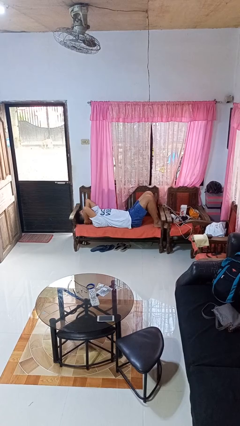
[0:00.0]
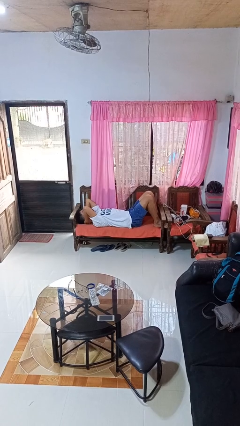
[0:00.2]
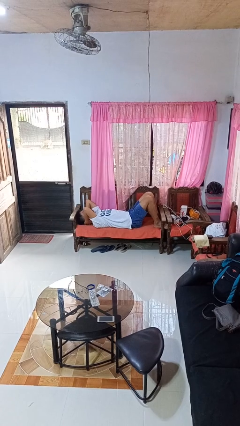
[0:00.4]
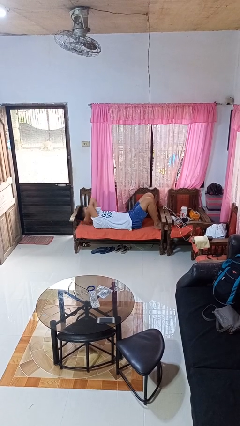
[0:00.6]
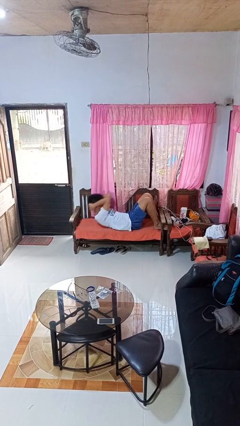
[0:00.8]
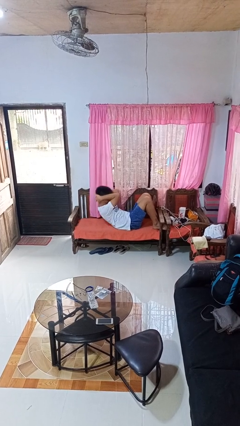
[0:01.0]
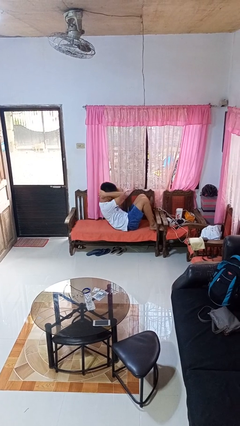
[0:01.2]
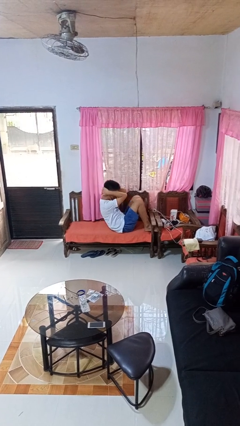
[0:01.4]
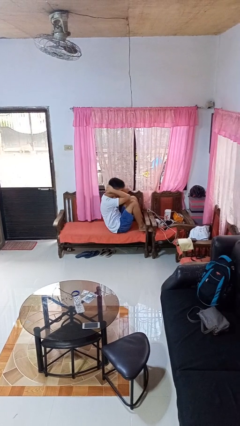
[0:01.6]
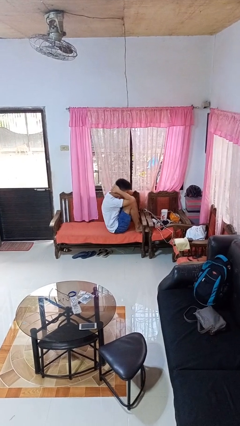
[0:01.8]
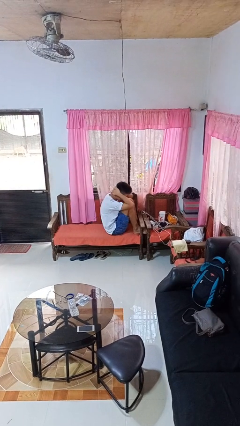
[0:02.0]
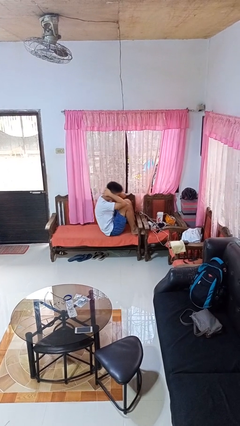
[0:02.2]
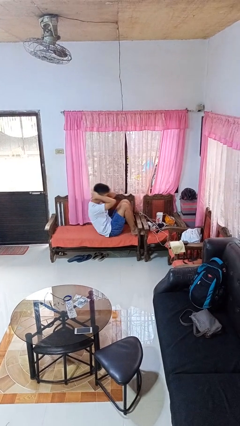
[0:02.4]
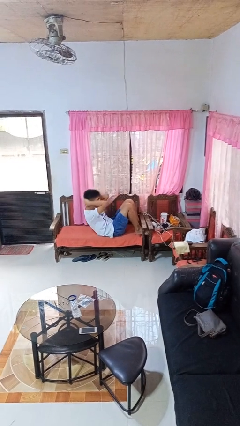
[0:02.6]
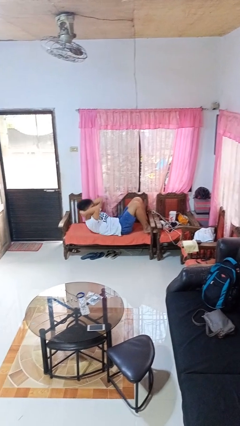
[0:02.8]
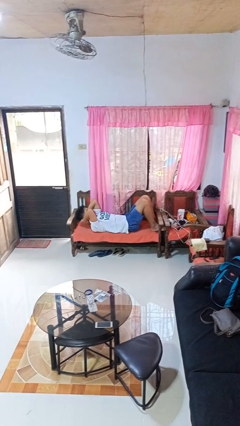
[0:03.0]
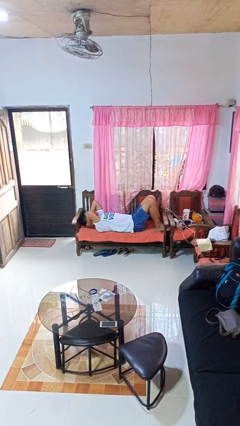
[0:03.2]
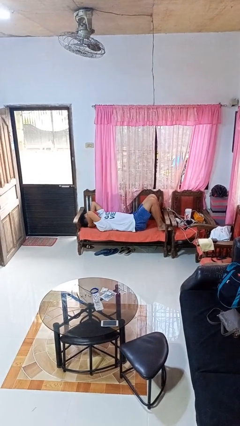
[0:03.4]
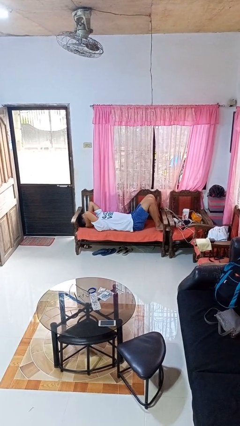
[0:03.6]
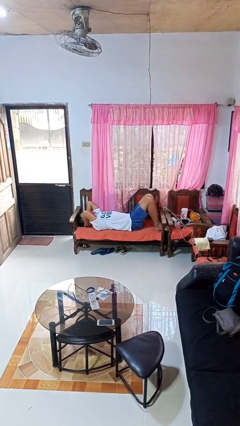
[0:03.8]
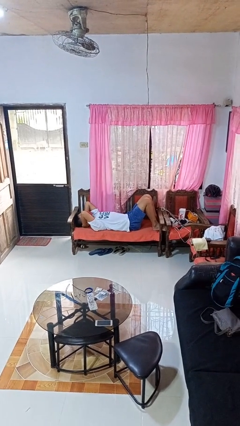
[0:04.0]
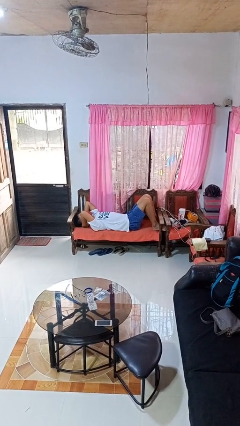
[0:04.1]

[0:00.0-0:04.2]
person exercises with situp

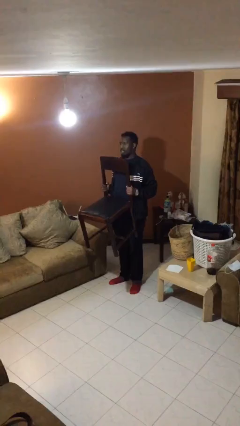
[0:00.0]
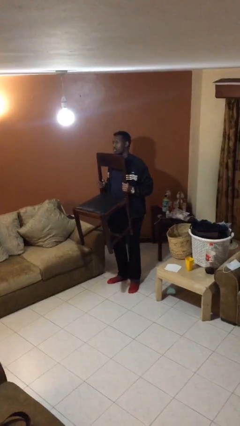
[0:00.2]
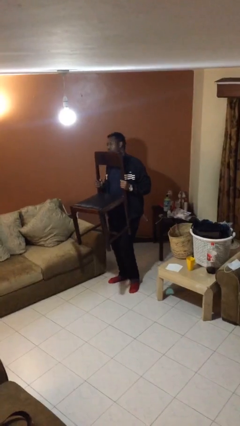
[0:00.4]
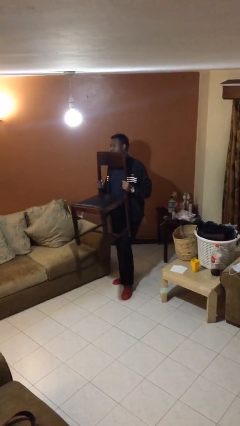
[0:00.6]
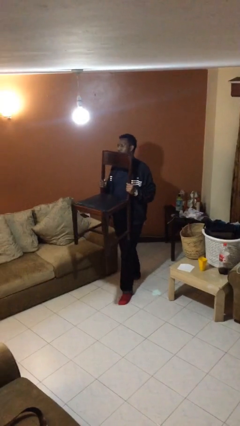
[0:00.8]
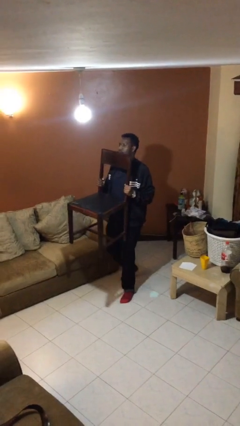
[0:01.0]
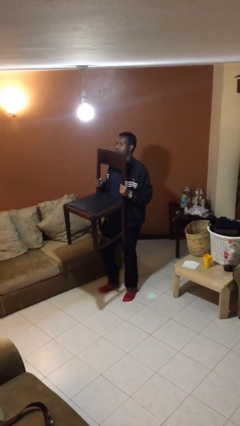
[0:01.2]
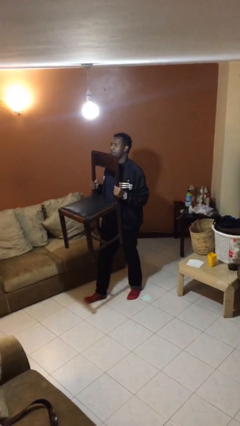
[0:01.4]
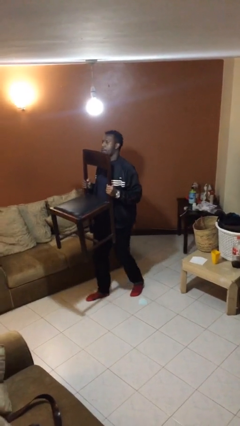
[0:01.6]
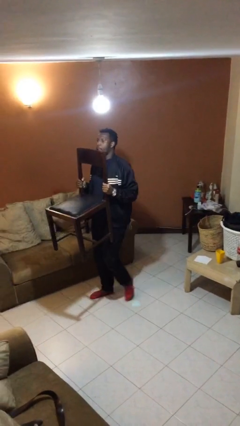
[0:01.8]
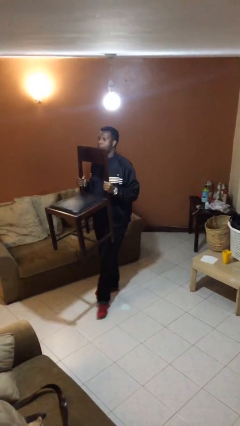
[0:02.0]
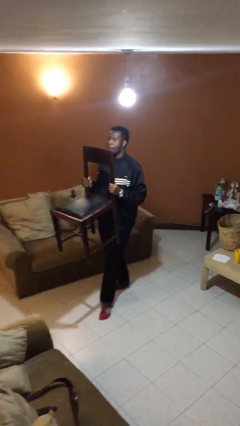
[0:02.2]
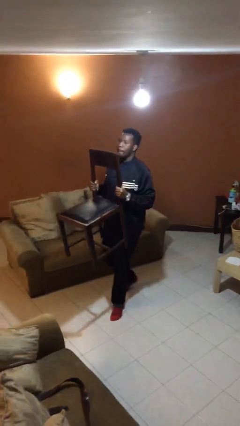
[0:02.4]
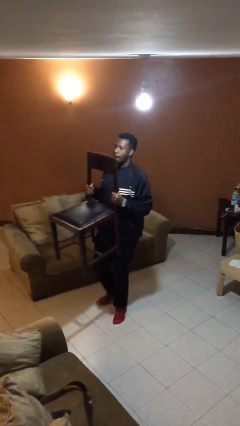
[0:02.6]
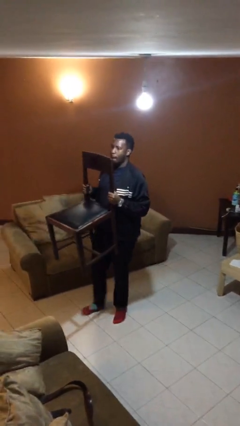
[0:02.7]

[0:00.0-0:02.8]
person carries furniture

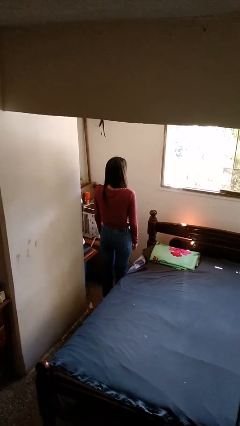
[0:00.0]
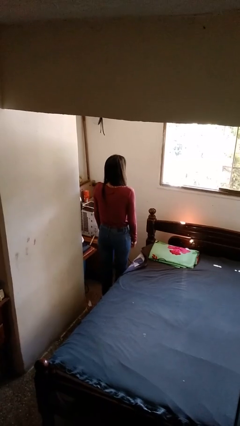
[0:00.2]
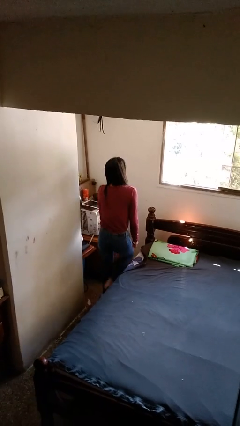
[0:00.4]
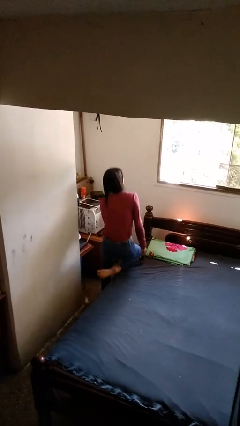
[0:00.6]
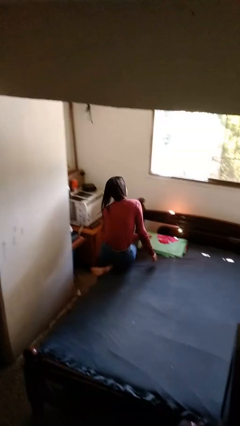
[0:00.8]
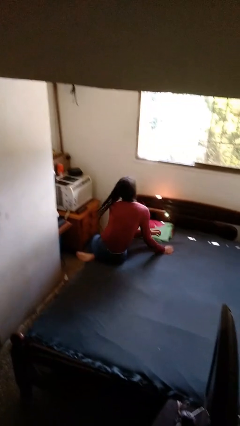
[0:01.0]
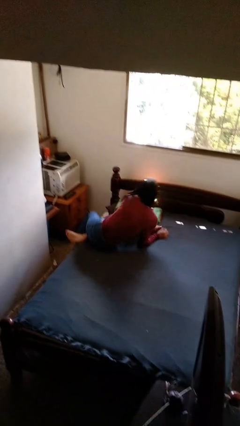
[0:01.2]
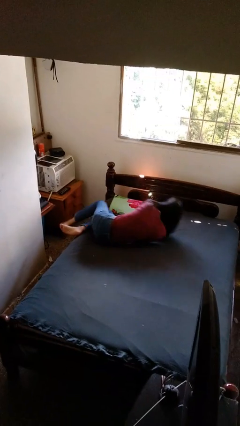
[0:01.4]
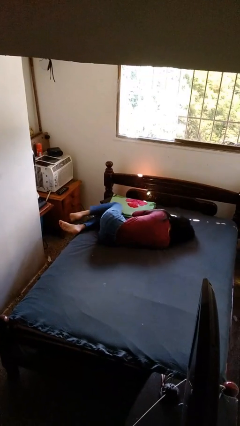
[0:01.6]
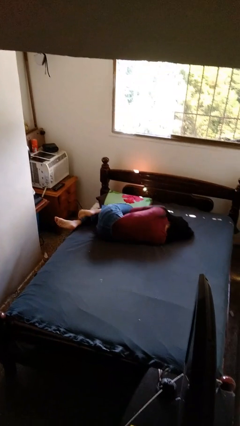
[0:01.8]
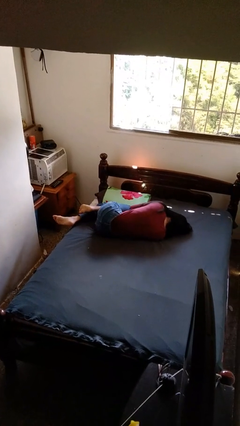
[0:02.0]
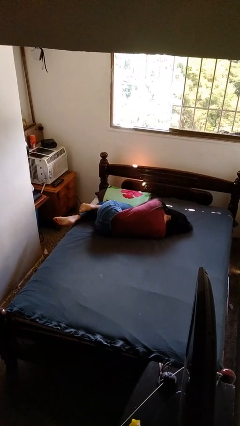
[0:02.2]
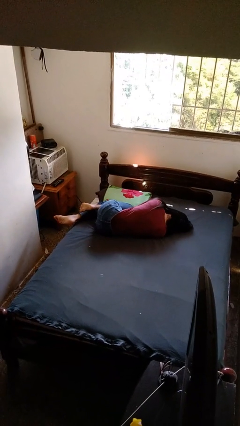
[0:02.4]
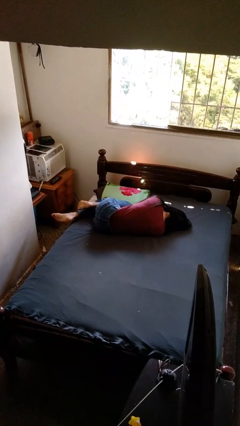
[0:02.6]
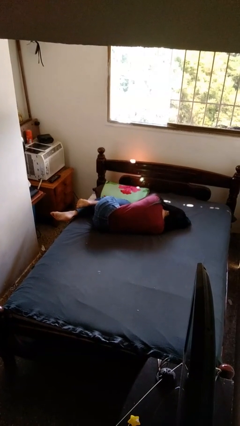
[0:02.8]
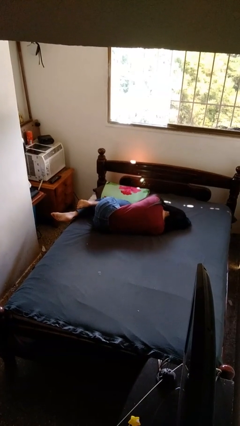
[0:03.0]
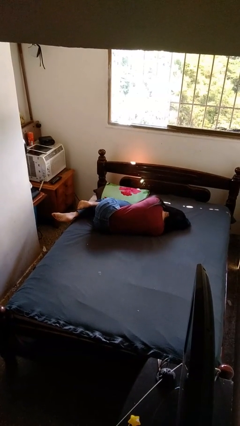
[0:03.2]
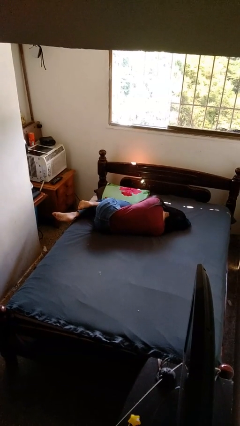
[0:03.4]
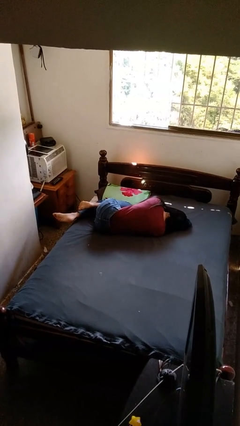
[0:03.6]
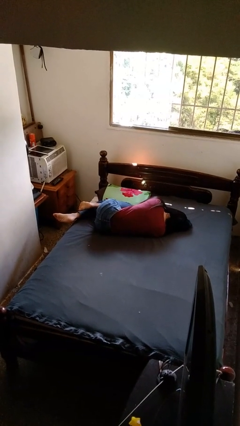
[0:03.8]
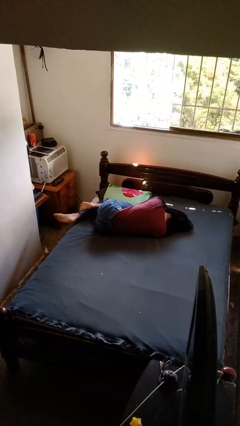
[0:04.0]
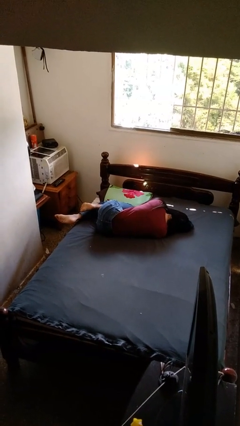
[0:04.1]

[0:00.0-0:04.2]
person lies down on bed

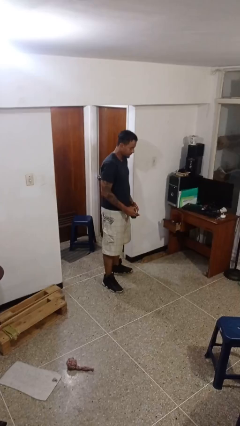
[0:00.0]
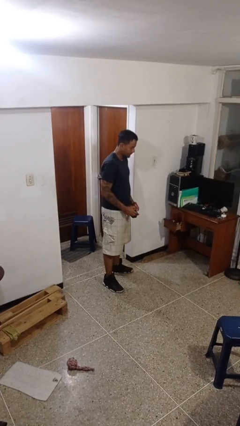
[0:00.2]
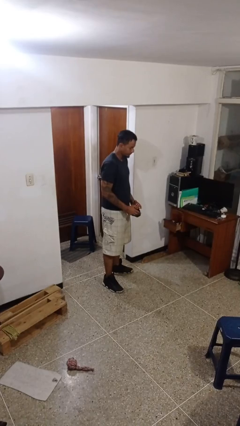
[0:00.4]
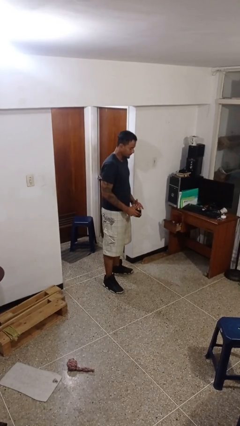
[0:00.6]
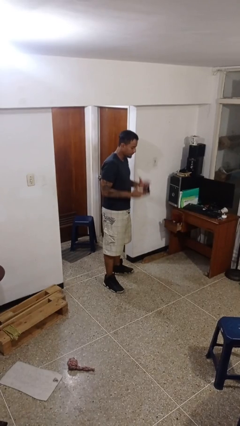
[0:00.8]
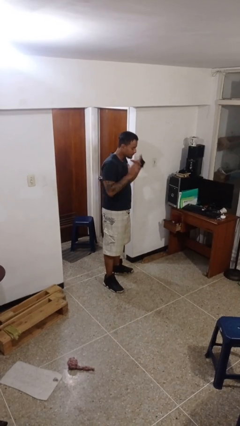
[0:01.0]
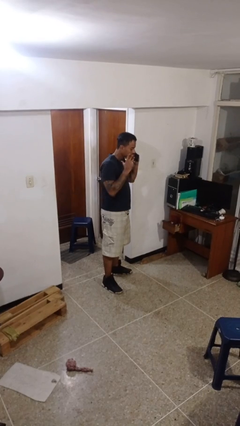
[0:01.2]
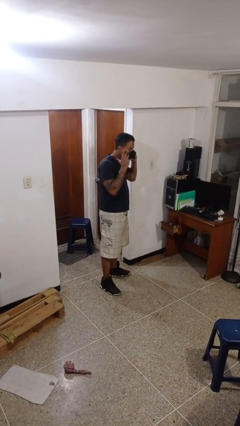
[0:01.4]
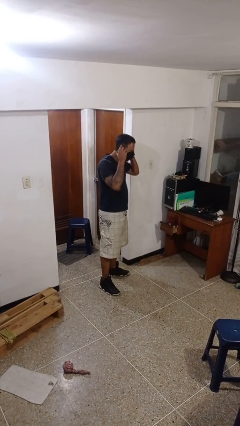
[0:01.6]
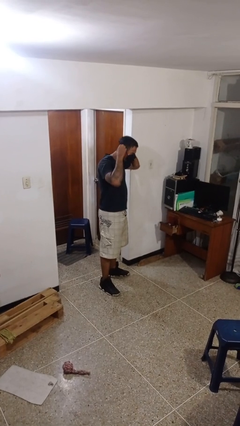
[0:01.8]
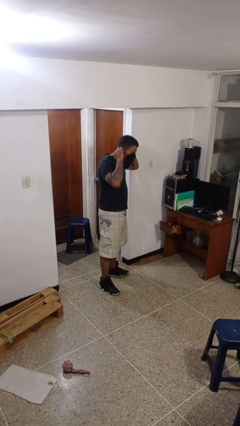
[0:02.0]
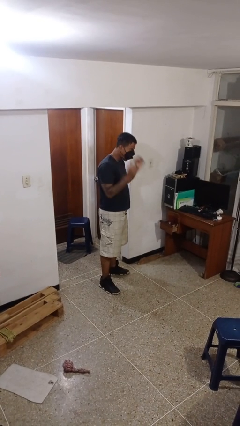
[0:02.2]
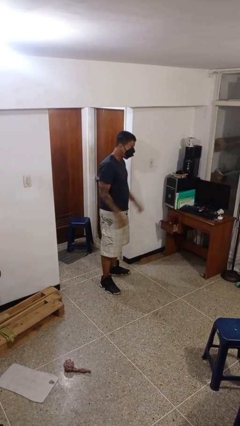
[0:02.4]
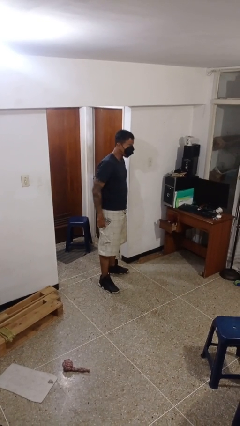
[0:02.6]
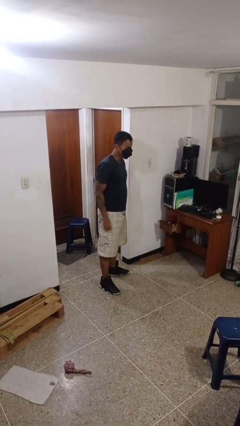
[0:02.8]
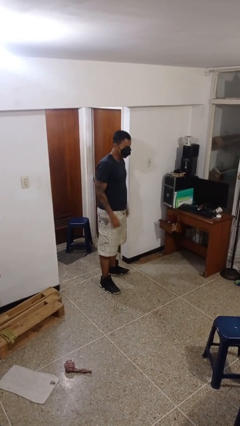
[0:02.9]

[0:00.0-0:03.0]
person puts on facemask

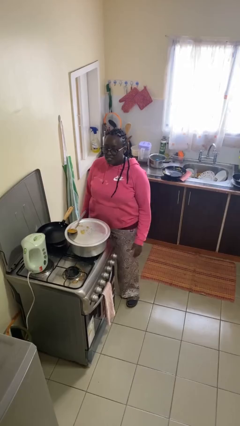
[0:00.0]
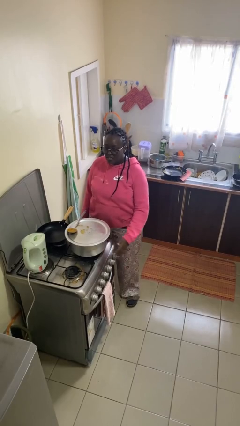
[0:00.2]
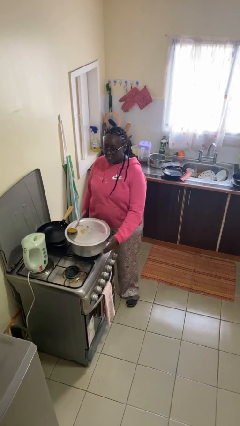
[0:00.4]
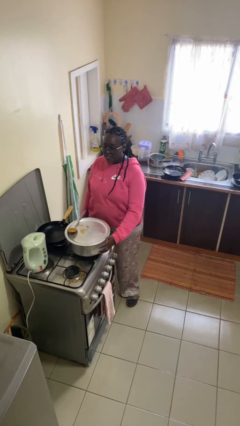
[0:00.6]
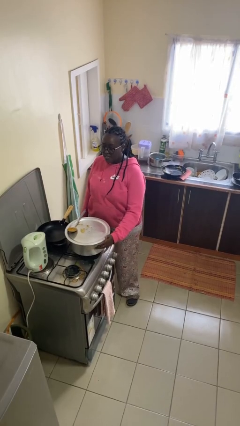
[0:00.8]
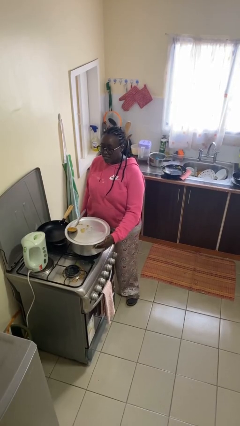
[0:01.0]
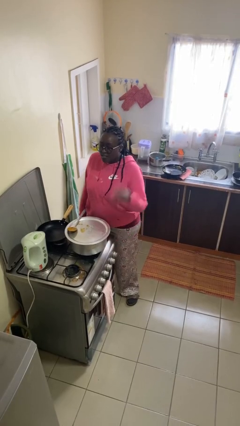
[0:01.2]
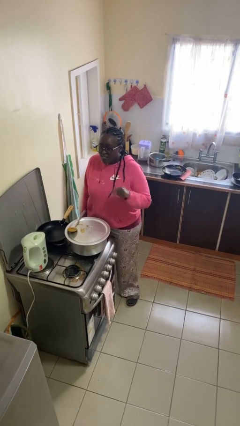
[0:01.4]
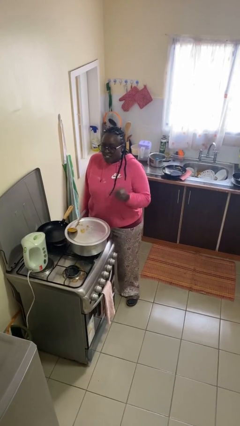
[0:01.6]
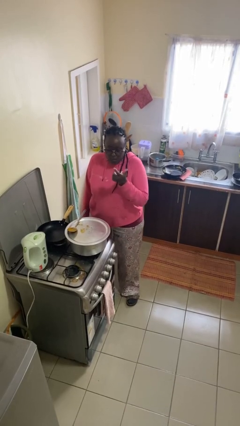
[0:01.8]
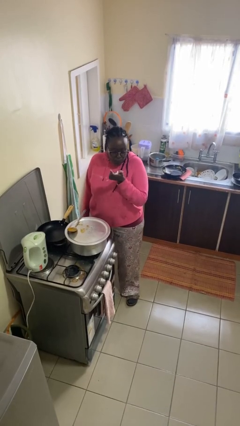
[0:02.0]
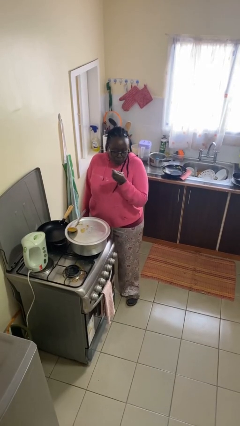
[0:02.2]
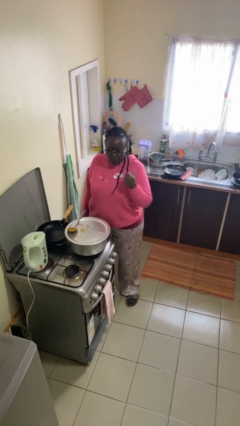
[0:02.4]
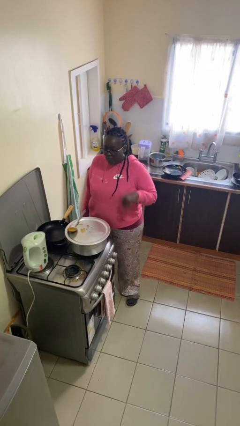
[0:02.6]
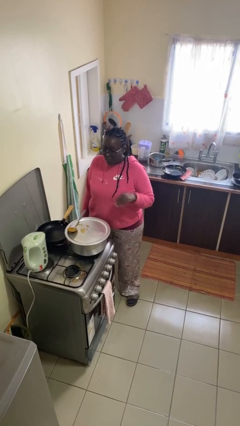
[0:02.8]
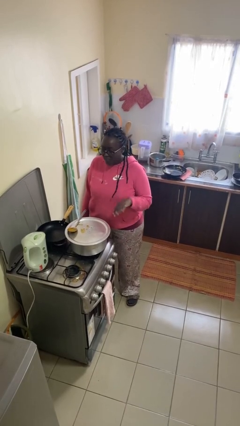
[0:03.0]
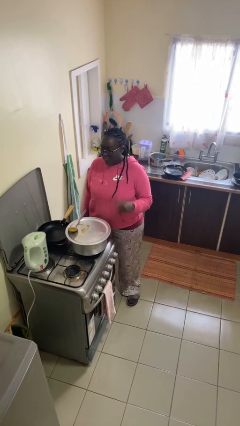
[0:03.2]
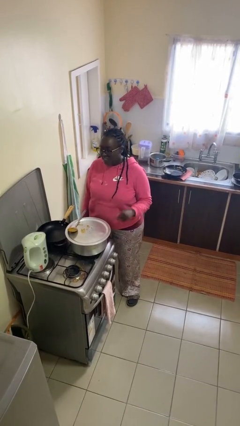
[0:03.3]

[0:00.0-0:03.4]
person burns hand

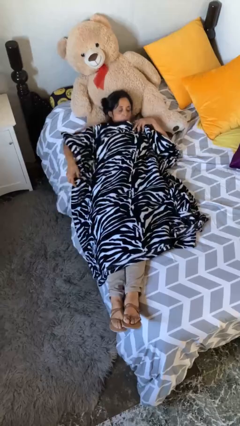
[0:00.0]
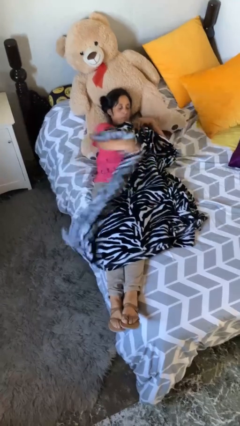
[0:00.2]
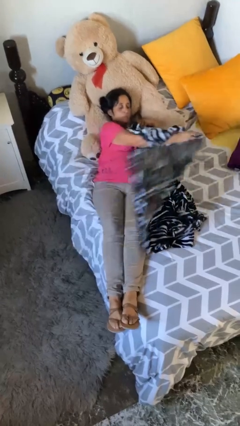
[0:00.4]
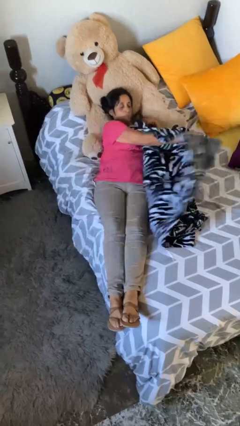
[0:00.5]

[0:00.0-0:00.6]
person uncovers with bedsheets
